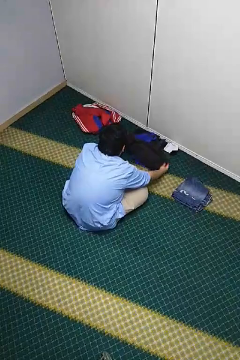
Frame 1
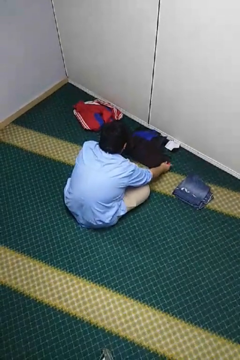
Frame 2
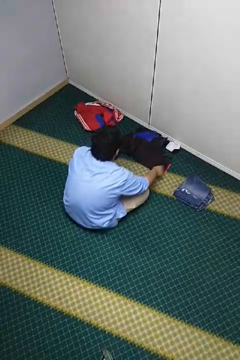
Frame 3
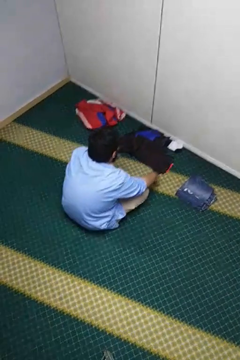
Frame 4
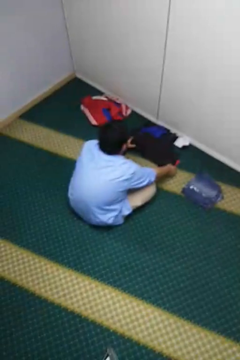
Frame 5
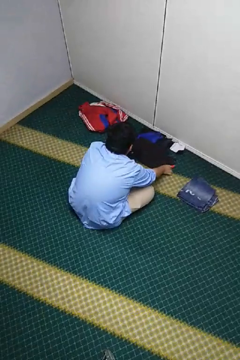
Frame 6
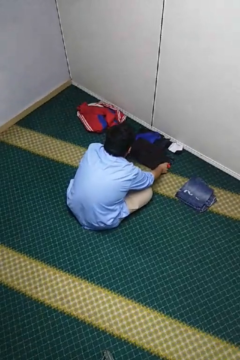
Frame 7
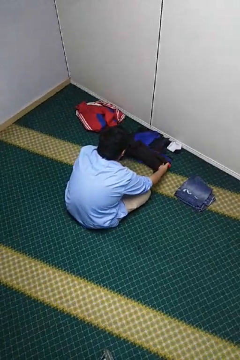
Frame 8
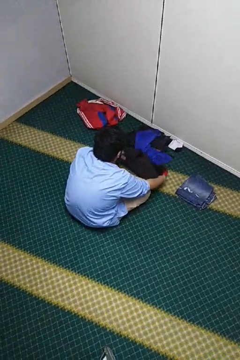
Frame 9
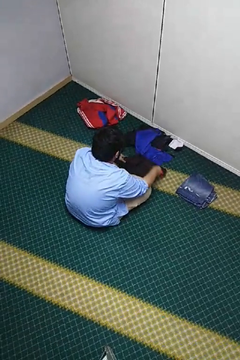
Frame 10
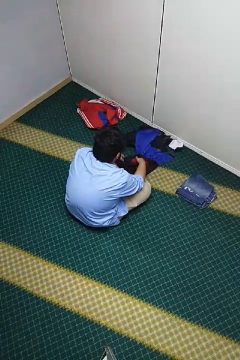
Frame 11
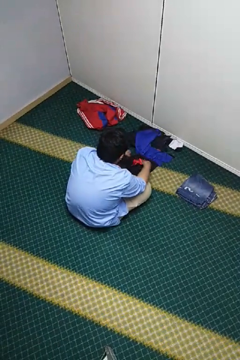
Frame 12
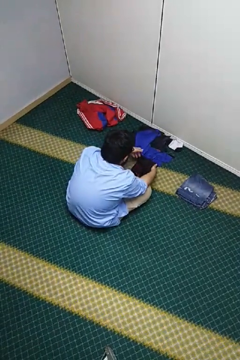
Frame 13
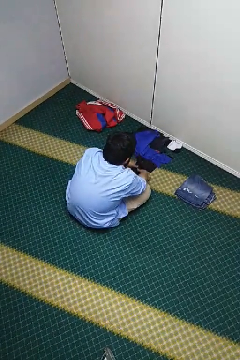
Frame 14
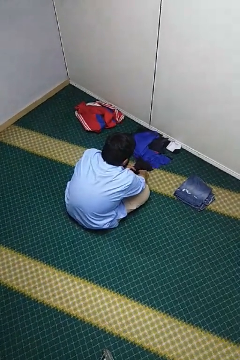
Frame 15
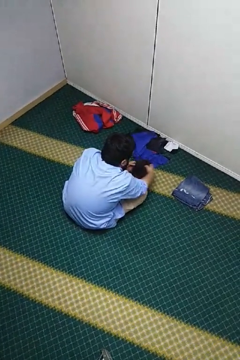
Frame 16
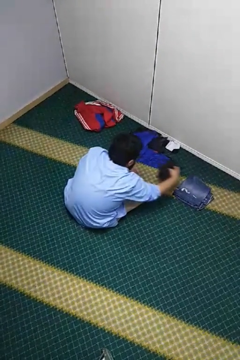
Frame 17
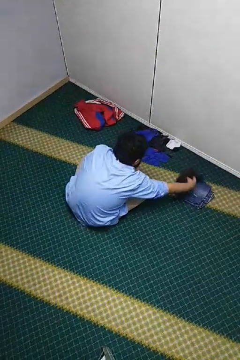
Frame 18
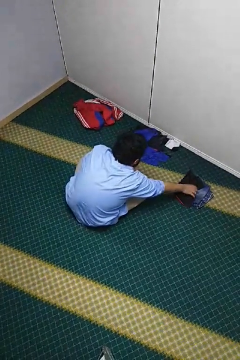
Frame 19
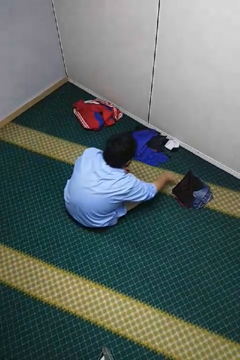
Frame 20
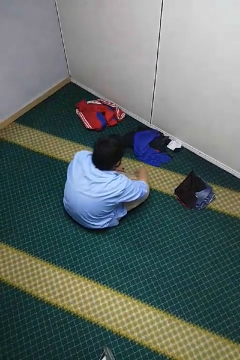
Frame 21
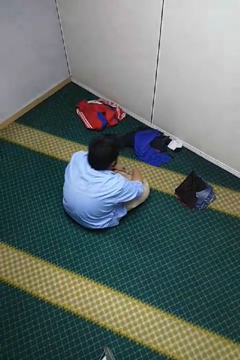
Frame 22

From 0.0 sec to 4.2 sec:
person folds shirt

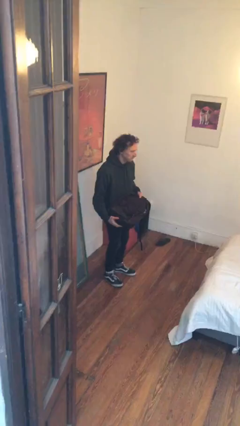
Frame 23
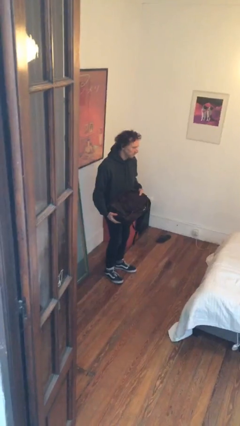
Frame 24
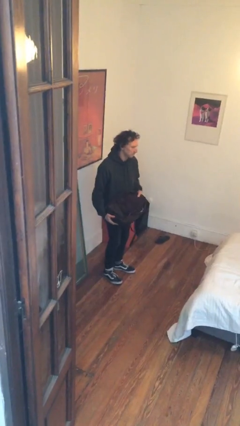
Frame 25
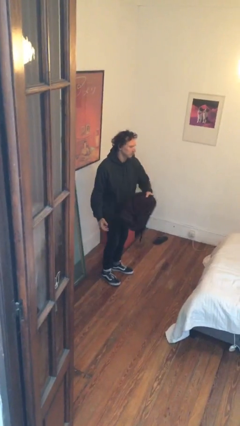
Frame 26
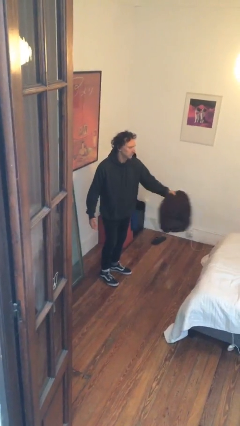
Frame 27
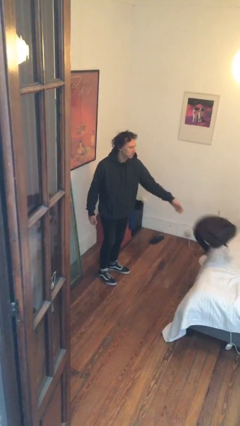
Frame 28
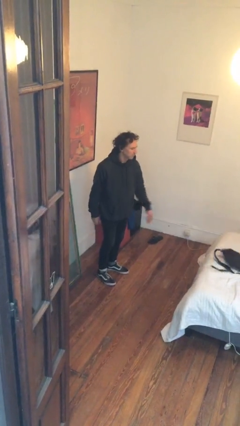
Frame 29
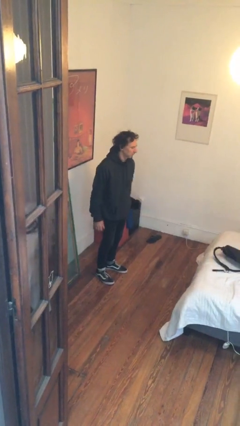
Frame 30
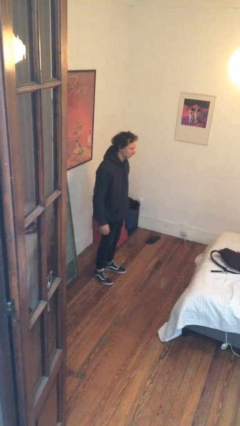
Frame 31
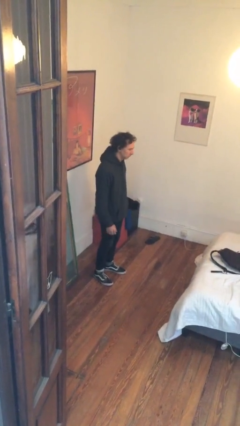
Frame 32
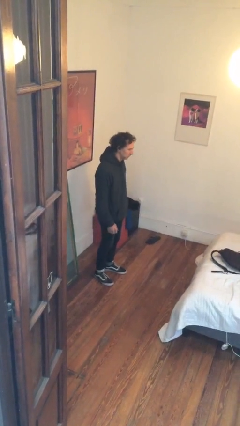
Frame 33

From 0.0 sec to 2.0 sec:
person throws object on bed

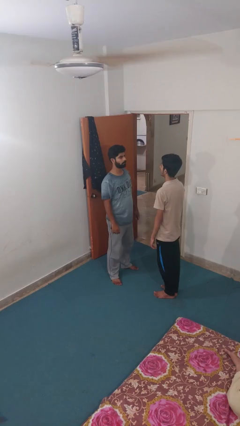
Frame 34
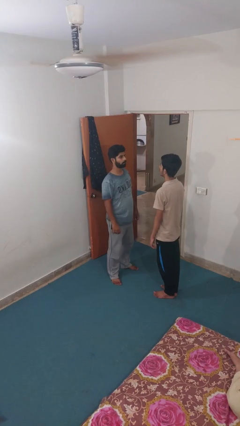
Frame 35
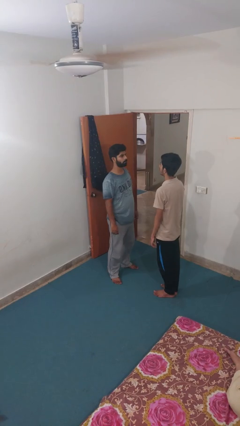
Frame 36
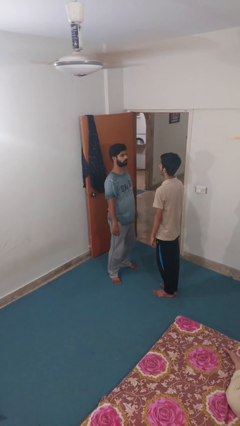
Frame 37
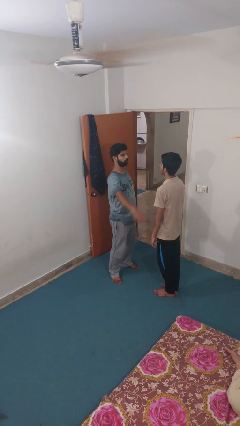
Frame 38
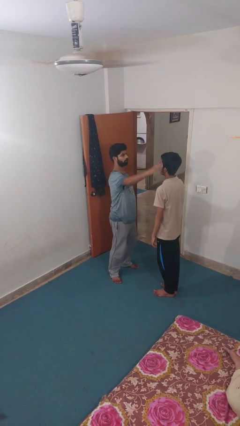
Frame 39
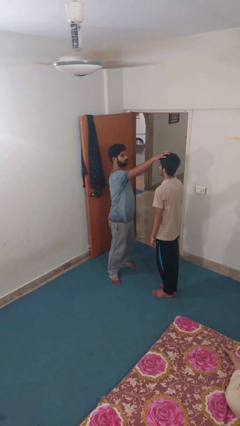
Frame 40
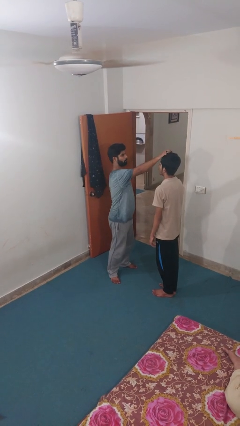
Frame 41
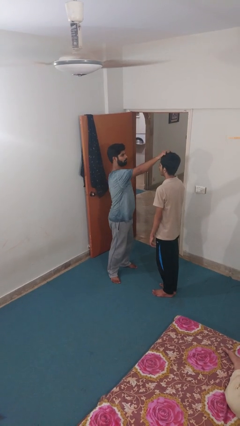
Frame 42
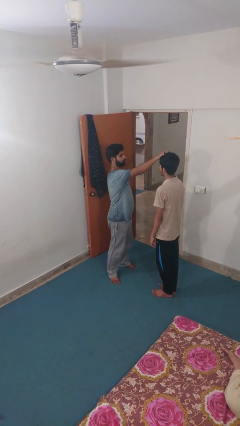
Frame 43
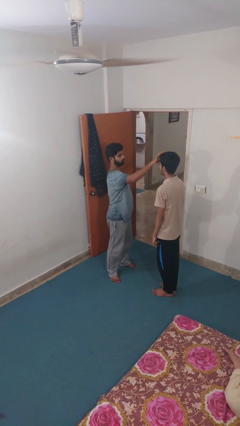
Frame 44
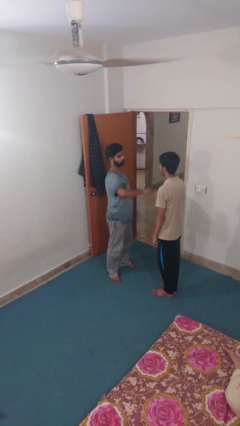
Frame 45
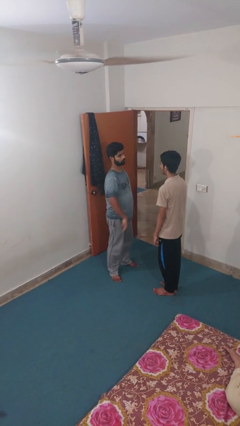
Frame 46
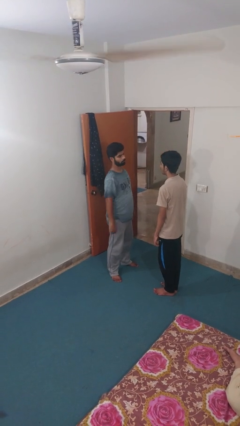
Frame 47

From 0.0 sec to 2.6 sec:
person grabs person by hair

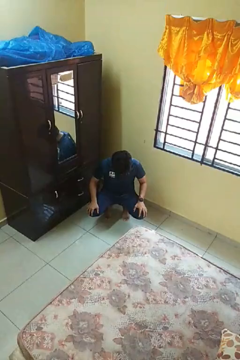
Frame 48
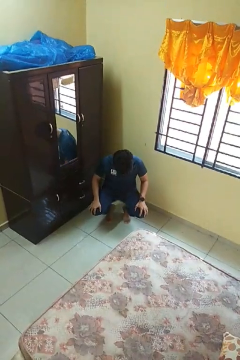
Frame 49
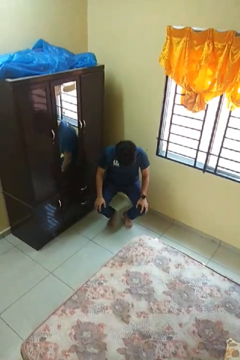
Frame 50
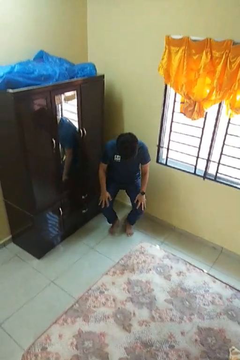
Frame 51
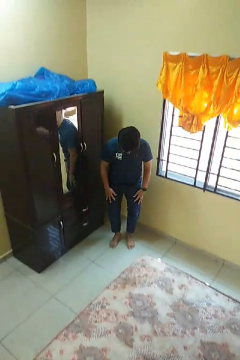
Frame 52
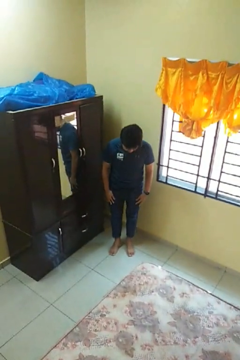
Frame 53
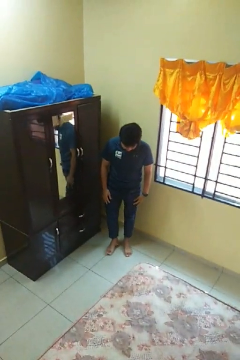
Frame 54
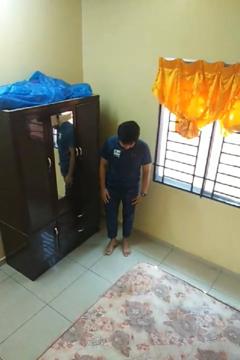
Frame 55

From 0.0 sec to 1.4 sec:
person stands up

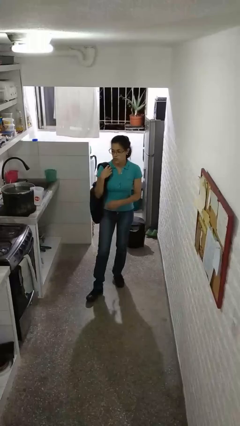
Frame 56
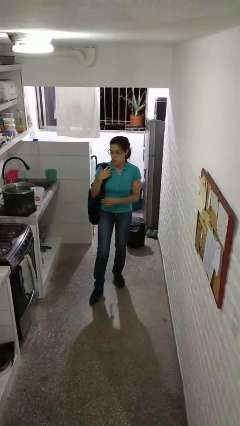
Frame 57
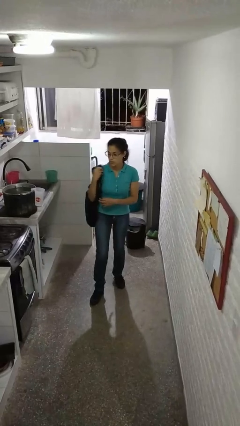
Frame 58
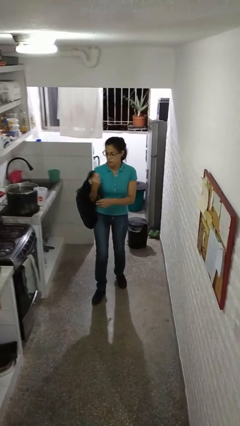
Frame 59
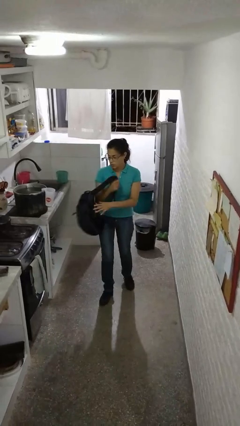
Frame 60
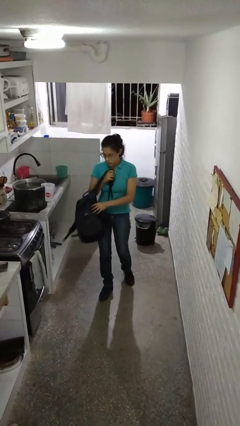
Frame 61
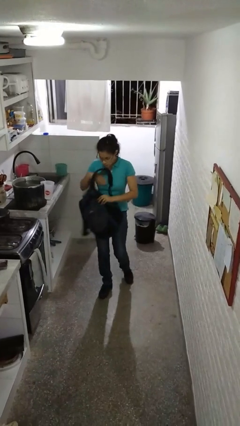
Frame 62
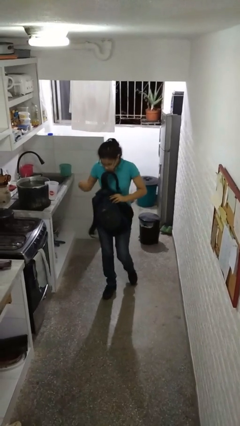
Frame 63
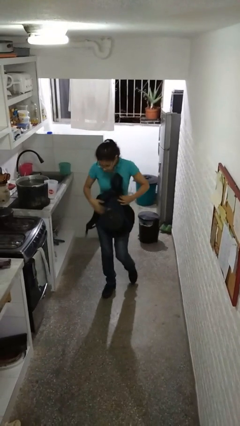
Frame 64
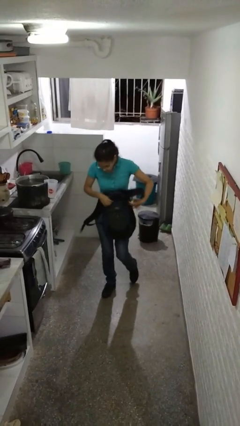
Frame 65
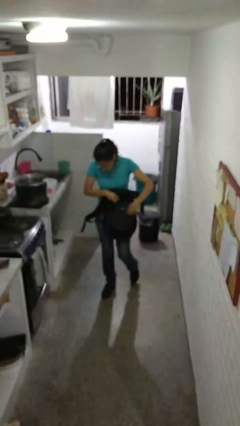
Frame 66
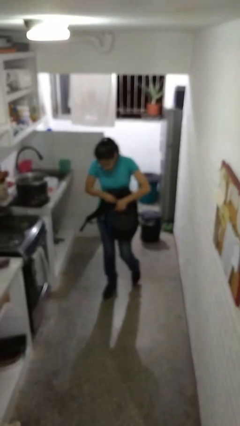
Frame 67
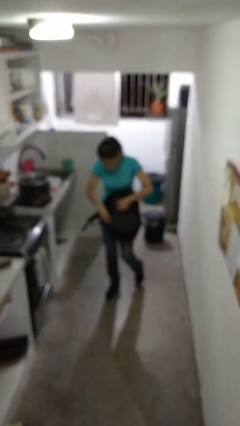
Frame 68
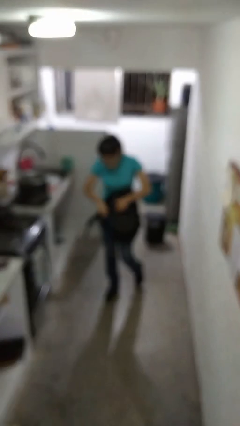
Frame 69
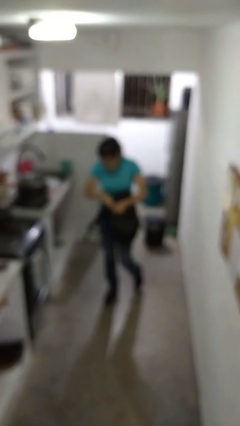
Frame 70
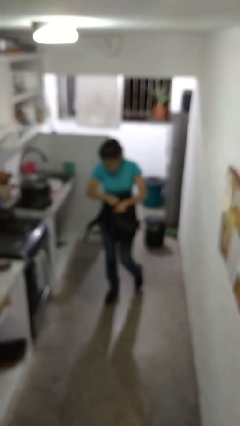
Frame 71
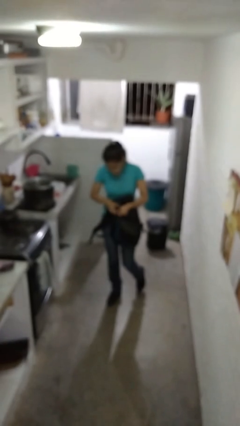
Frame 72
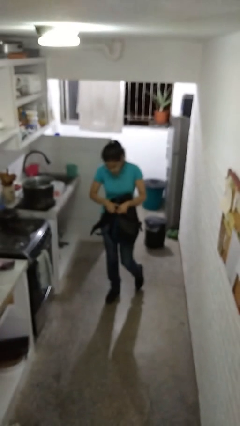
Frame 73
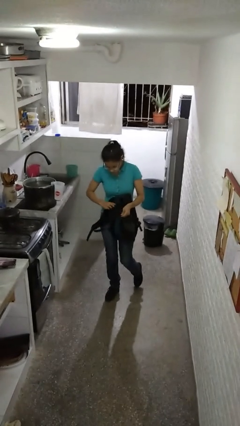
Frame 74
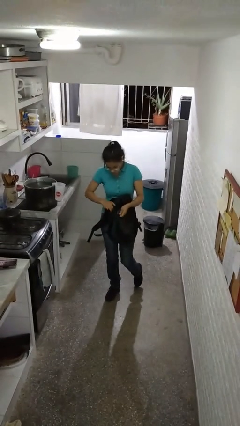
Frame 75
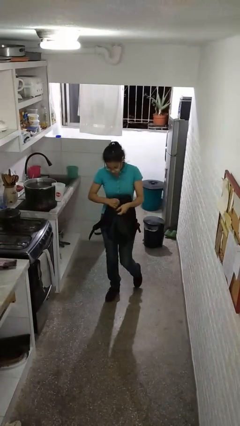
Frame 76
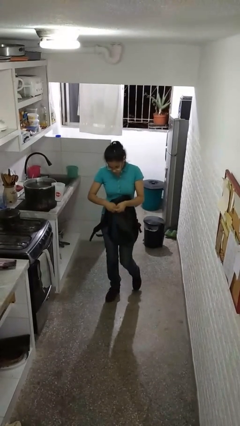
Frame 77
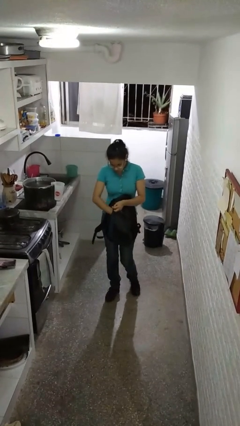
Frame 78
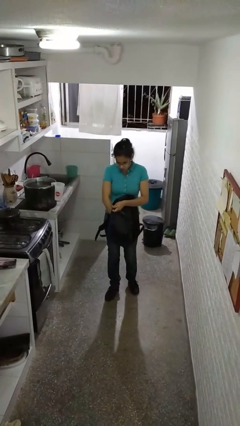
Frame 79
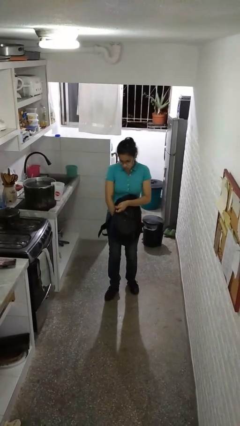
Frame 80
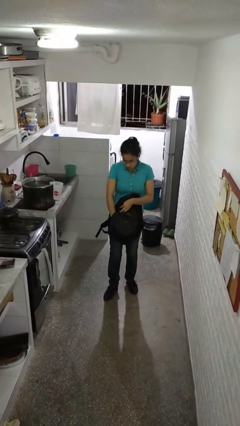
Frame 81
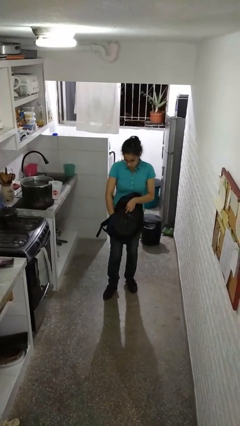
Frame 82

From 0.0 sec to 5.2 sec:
person searches in backpack

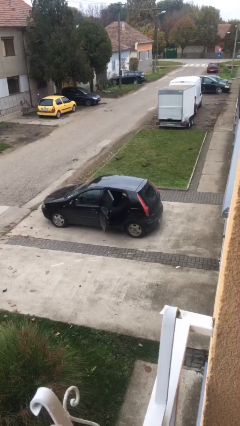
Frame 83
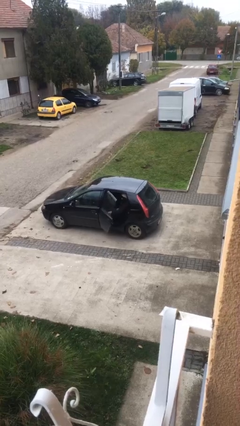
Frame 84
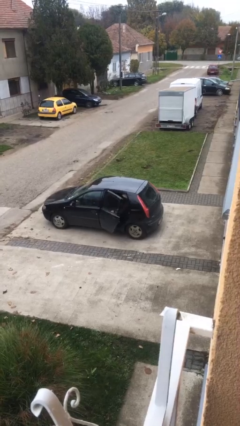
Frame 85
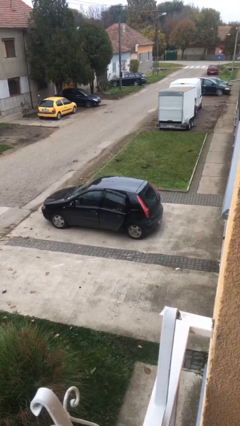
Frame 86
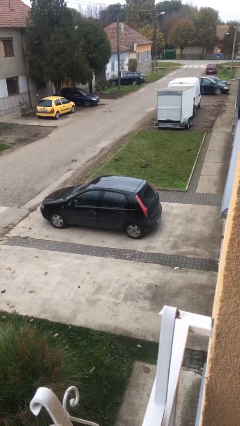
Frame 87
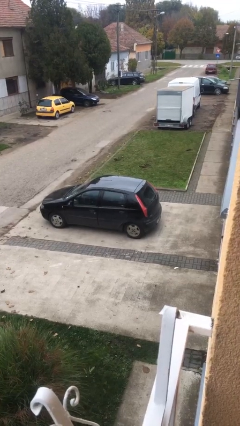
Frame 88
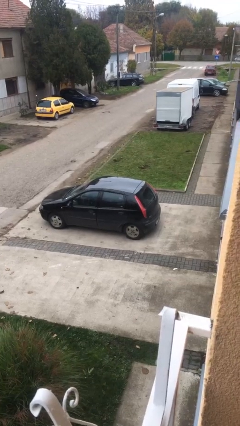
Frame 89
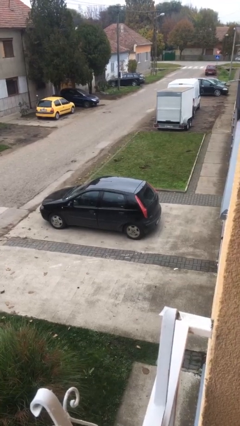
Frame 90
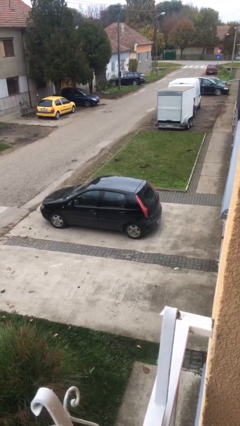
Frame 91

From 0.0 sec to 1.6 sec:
person closes car door

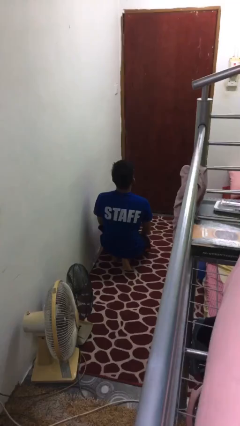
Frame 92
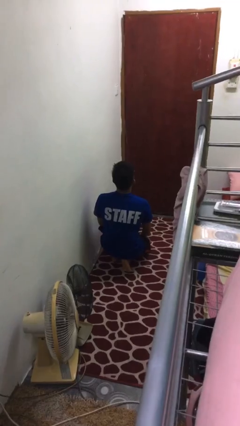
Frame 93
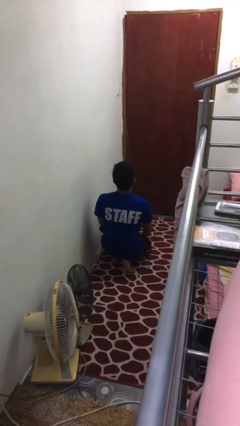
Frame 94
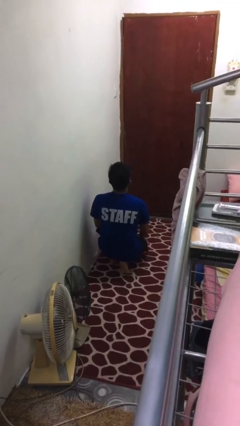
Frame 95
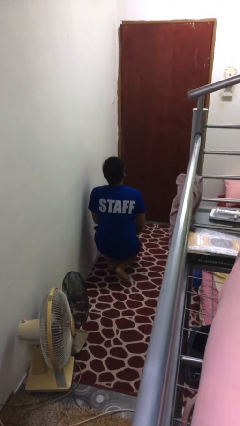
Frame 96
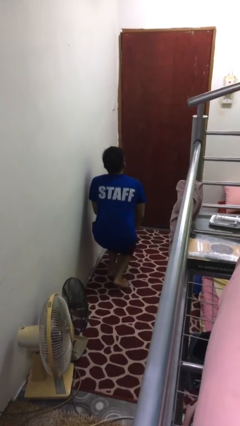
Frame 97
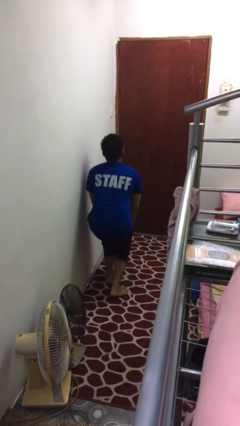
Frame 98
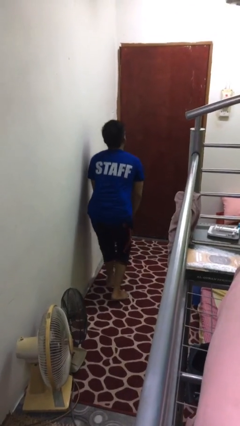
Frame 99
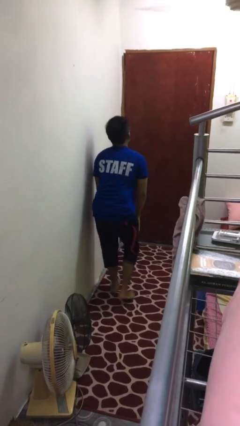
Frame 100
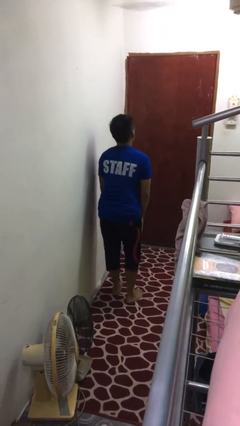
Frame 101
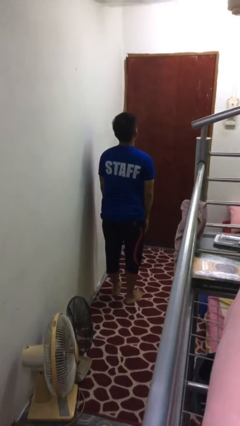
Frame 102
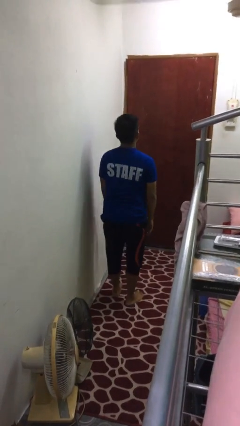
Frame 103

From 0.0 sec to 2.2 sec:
person stands up from floor
